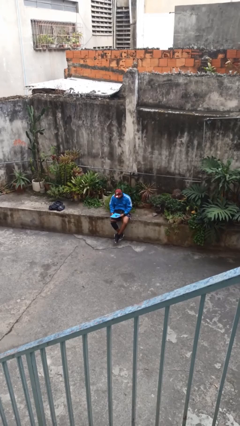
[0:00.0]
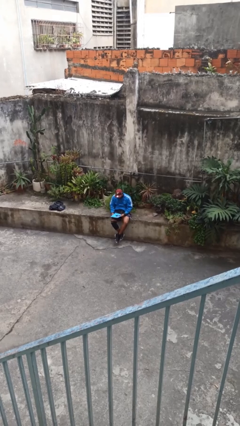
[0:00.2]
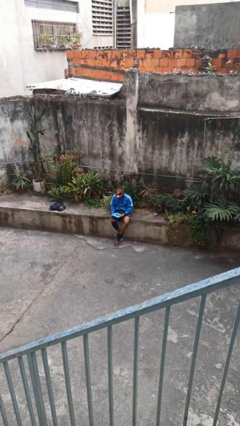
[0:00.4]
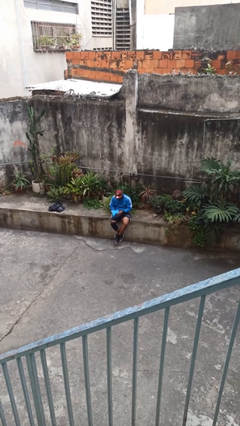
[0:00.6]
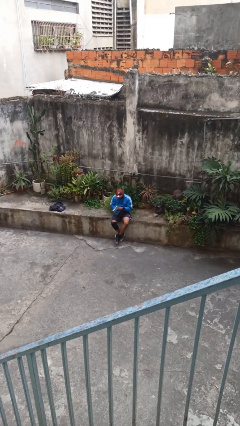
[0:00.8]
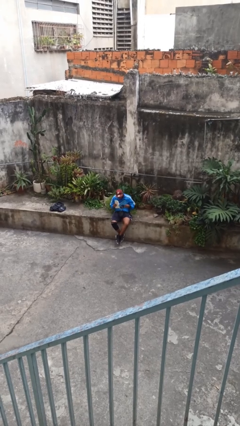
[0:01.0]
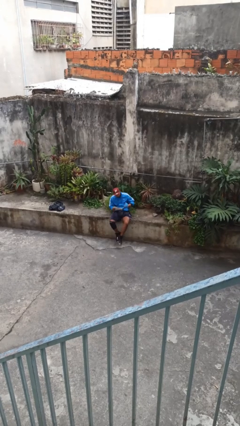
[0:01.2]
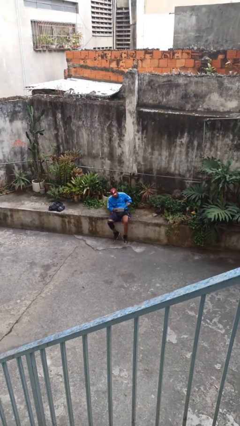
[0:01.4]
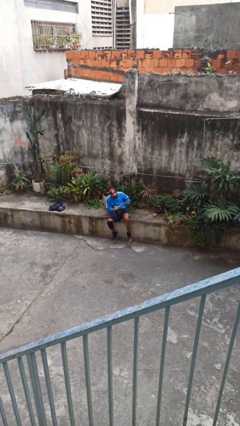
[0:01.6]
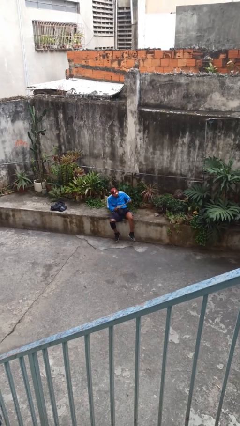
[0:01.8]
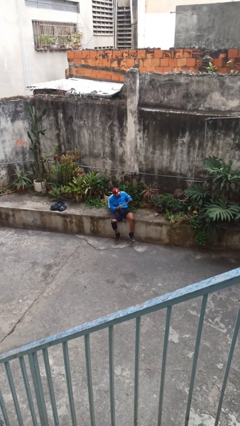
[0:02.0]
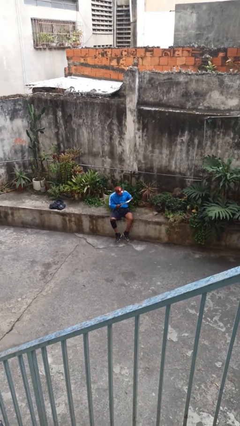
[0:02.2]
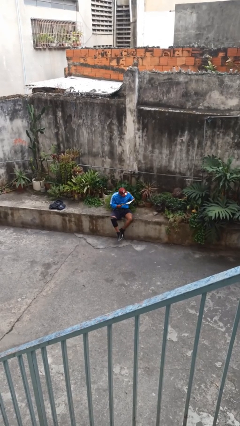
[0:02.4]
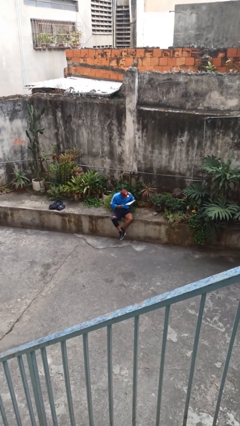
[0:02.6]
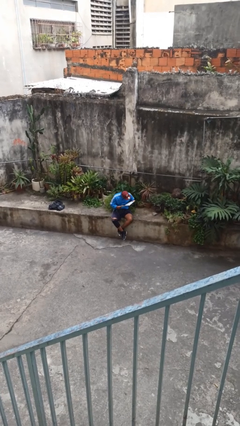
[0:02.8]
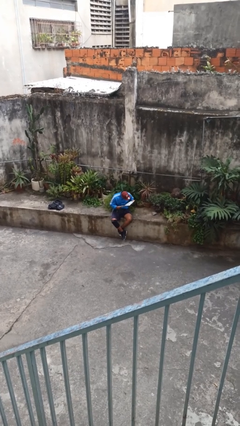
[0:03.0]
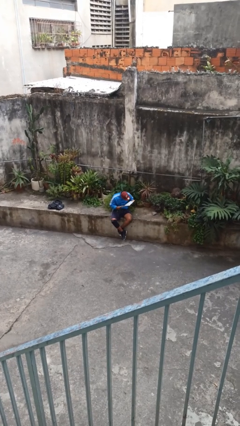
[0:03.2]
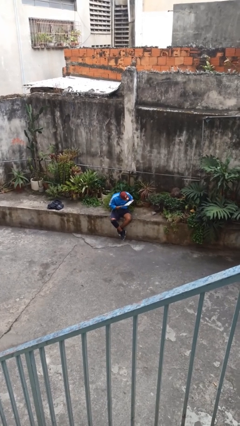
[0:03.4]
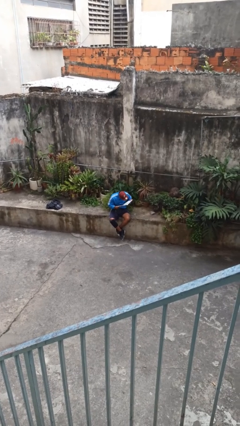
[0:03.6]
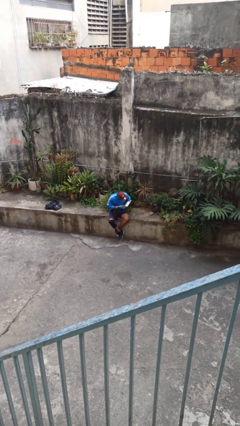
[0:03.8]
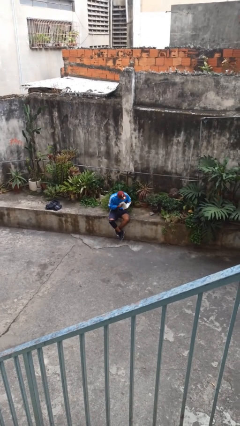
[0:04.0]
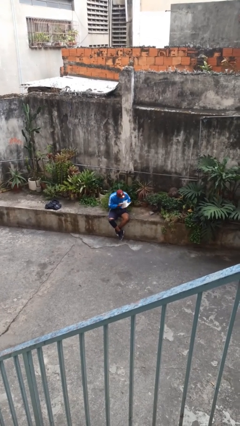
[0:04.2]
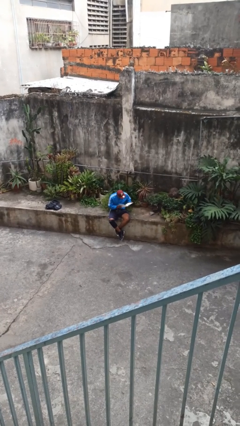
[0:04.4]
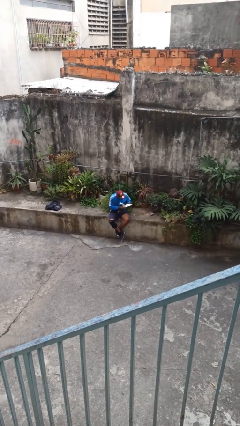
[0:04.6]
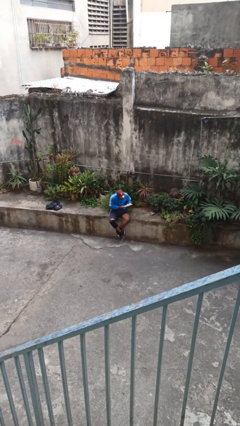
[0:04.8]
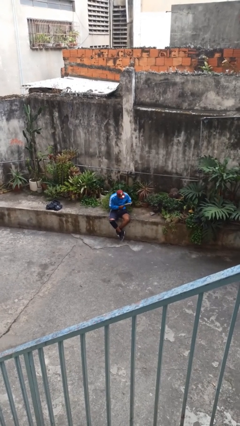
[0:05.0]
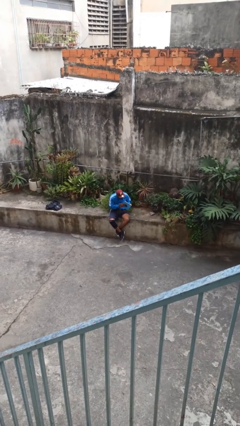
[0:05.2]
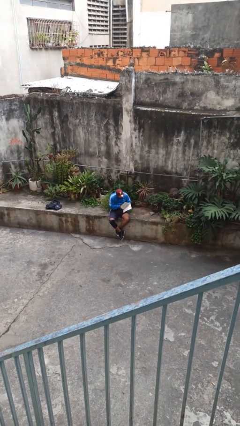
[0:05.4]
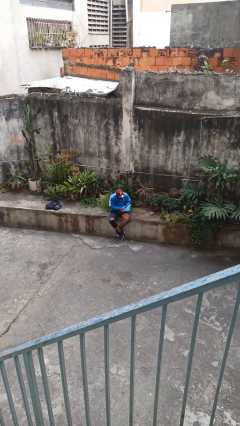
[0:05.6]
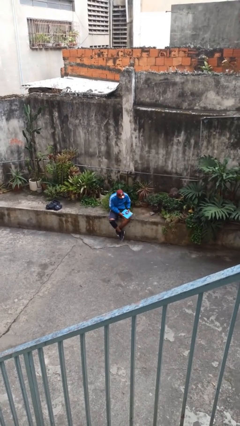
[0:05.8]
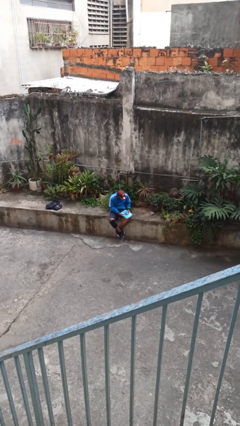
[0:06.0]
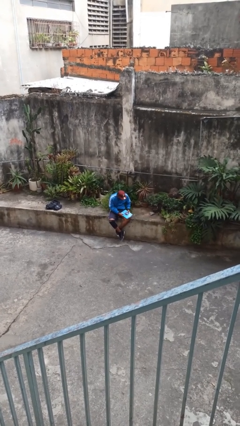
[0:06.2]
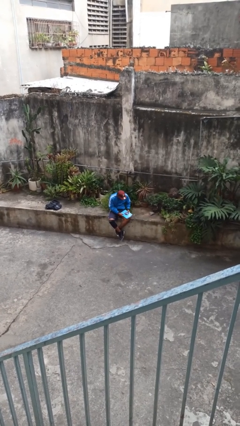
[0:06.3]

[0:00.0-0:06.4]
person reads document

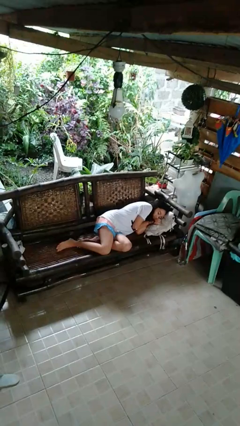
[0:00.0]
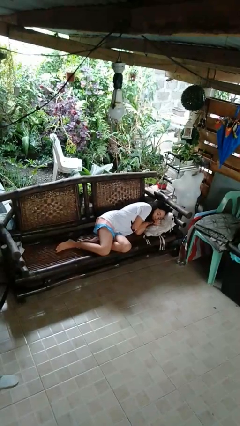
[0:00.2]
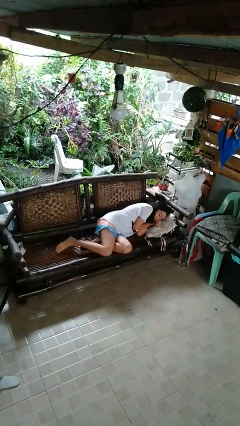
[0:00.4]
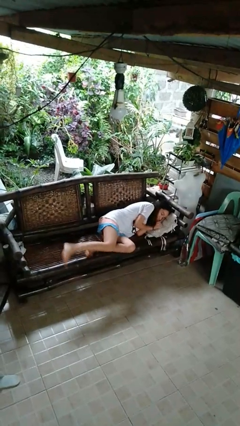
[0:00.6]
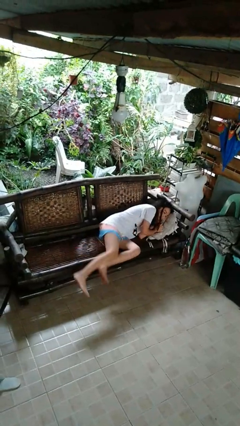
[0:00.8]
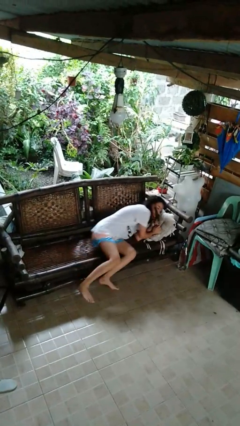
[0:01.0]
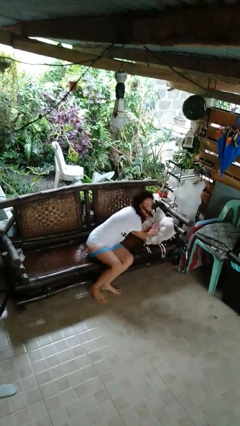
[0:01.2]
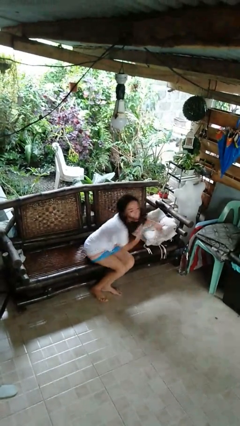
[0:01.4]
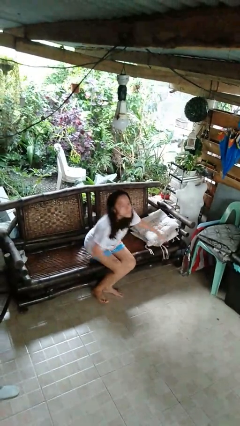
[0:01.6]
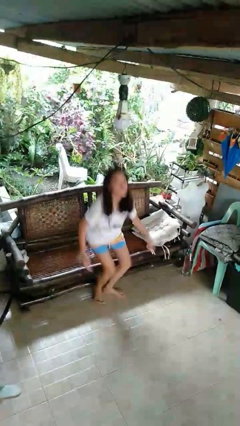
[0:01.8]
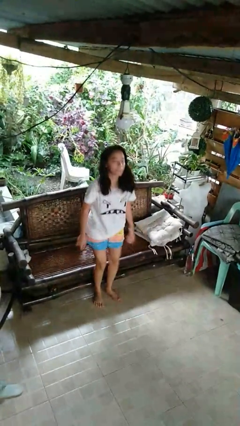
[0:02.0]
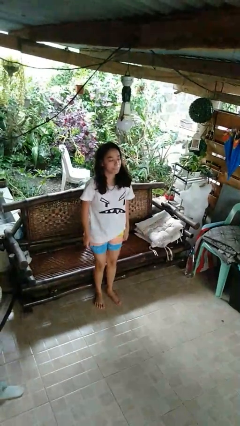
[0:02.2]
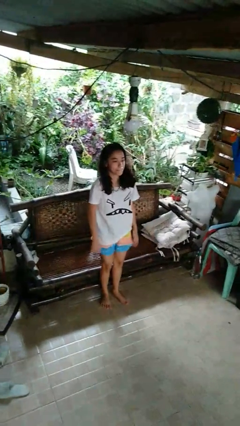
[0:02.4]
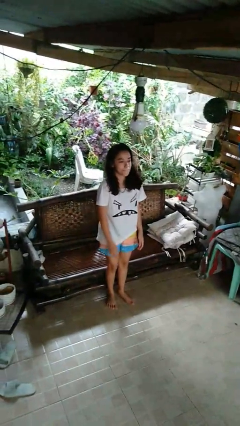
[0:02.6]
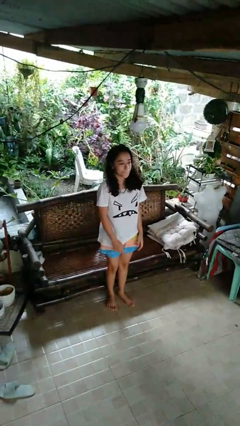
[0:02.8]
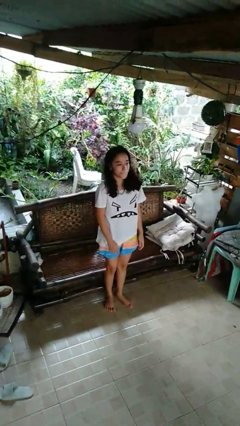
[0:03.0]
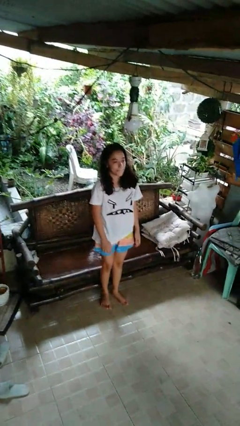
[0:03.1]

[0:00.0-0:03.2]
person stands up

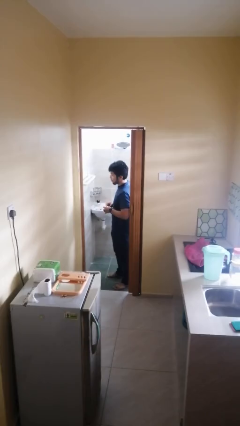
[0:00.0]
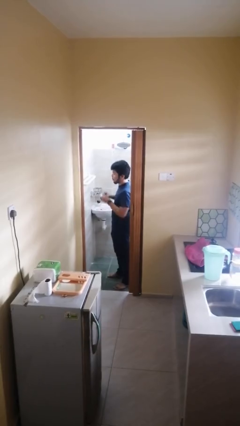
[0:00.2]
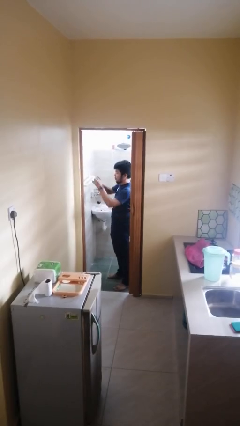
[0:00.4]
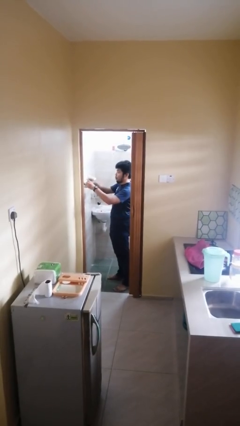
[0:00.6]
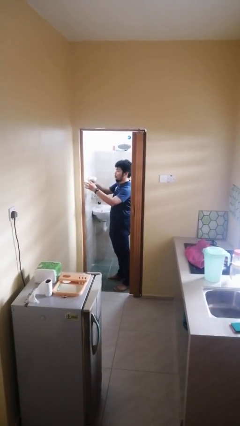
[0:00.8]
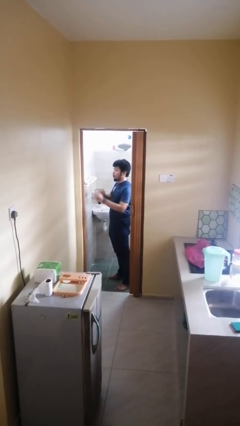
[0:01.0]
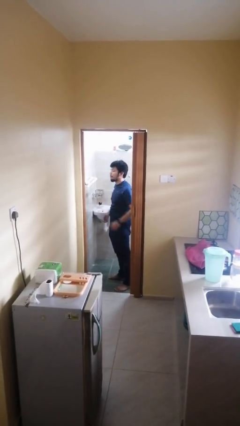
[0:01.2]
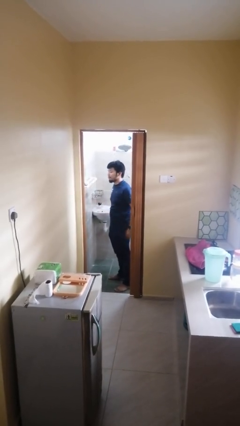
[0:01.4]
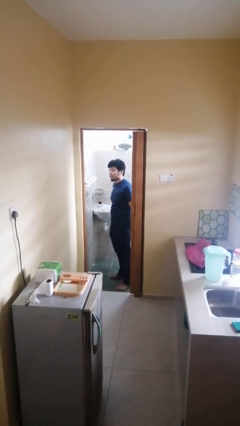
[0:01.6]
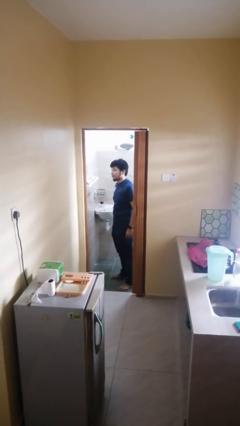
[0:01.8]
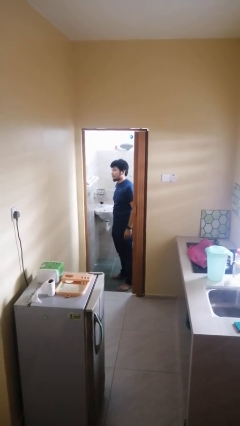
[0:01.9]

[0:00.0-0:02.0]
person puts down object on countertop

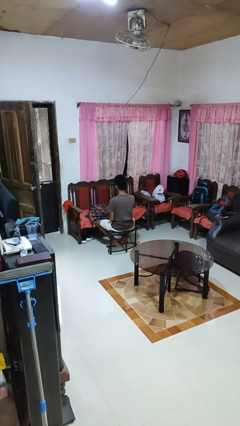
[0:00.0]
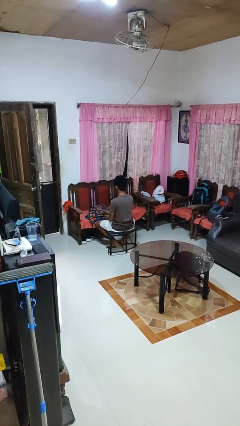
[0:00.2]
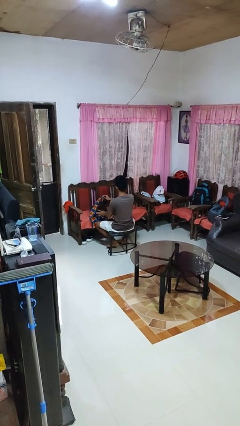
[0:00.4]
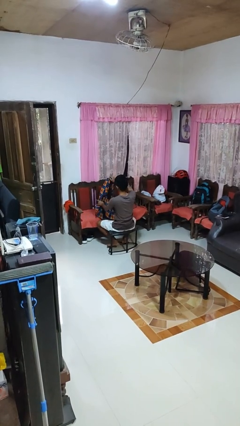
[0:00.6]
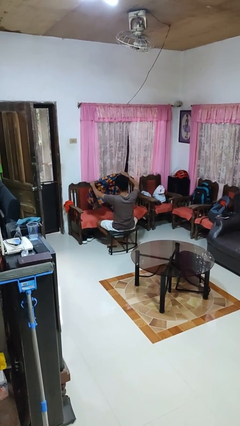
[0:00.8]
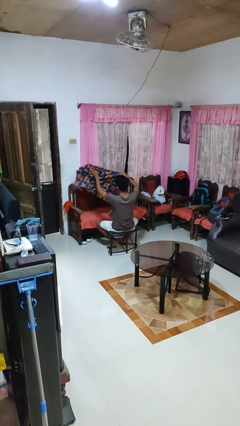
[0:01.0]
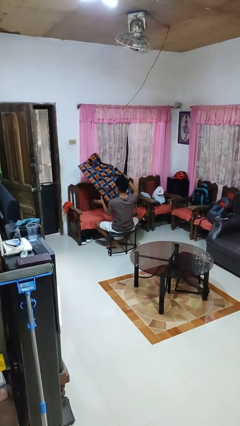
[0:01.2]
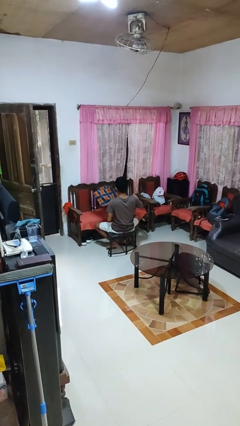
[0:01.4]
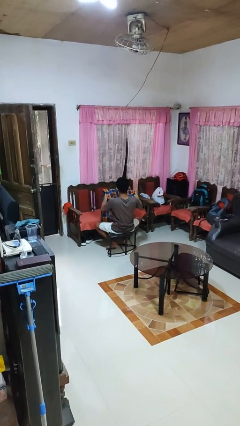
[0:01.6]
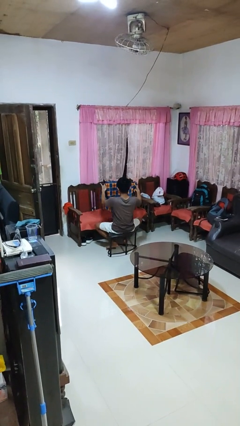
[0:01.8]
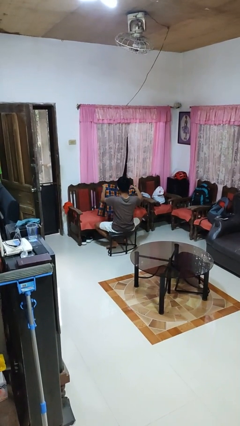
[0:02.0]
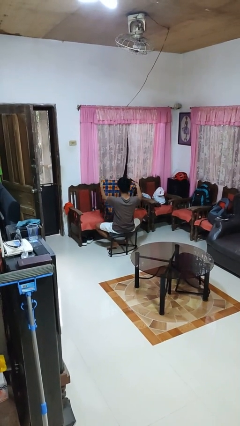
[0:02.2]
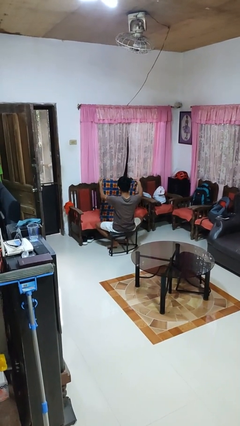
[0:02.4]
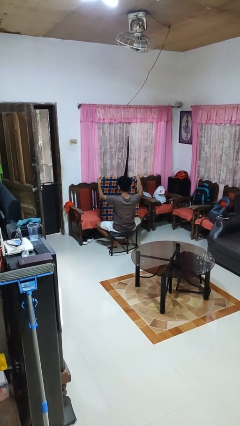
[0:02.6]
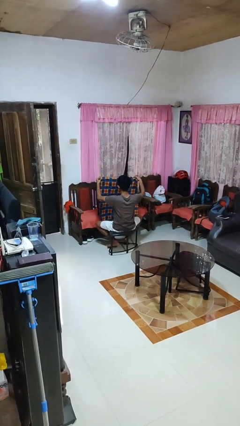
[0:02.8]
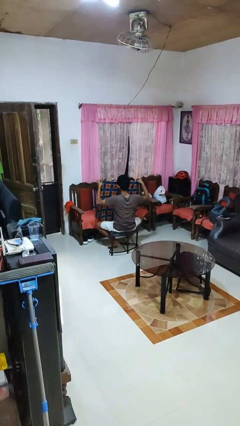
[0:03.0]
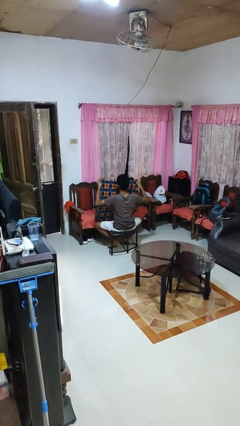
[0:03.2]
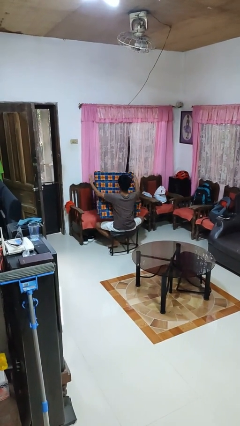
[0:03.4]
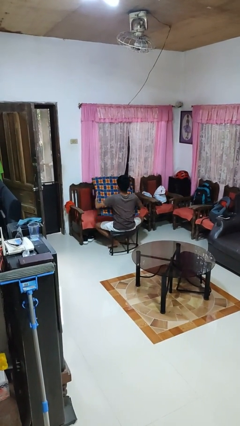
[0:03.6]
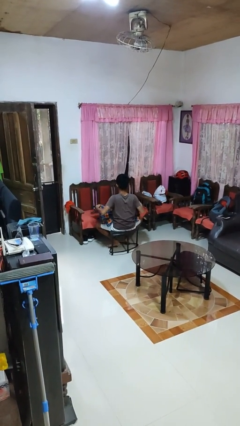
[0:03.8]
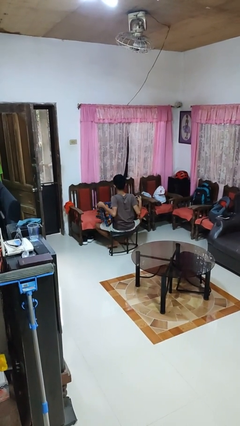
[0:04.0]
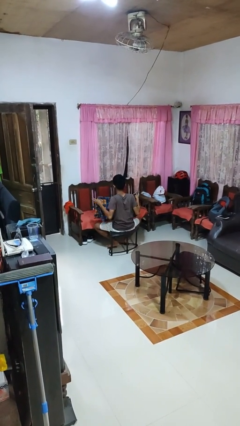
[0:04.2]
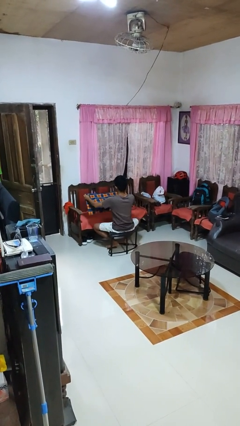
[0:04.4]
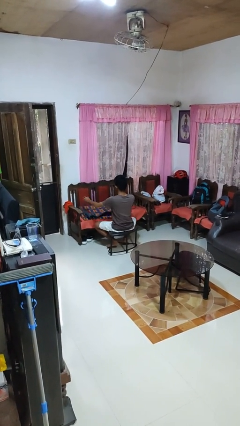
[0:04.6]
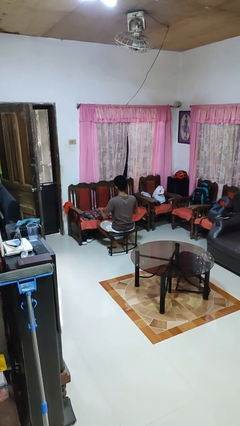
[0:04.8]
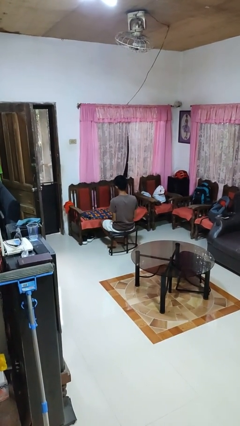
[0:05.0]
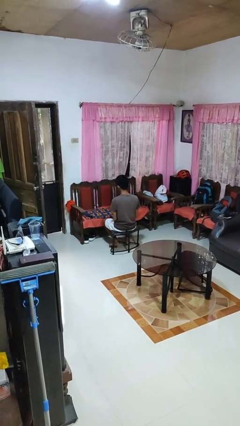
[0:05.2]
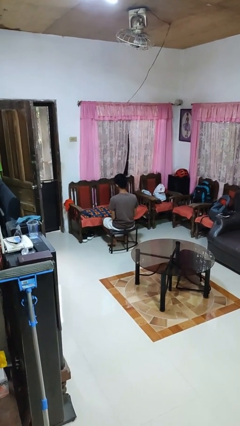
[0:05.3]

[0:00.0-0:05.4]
person folds blanket

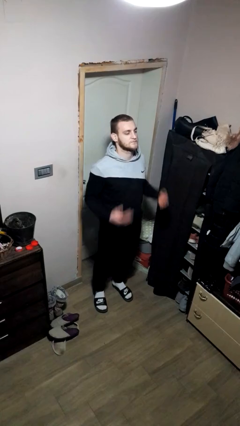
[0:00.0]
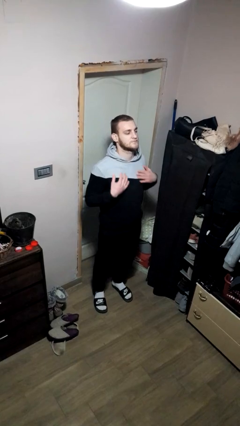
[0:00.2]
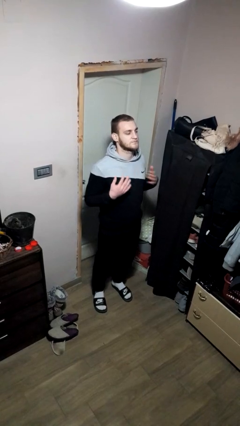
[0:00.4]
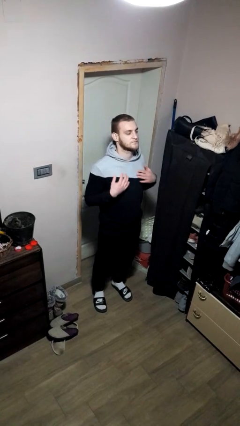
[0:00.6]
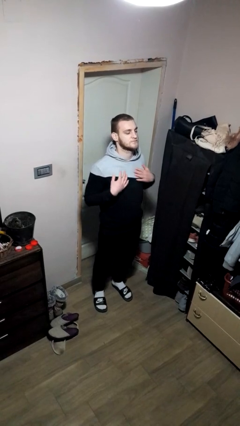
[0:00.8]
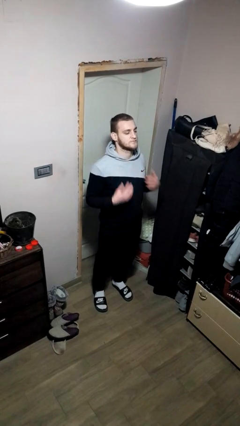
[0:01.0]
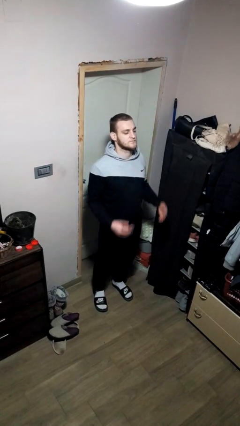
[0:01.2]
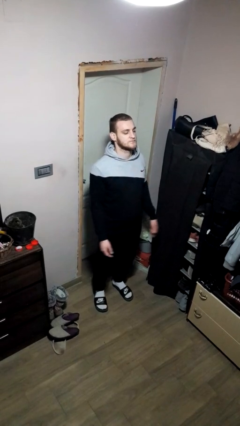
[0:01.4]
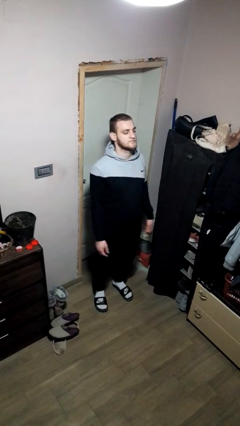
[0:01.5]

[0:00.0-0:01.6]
person drums on chest
